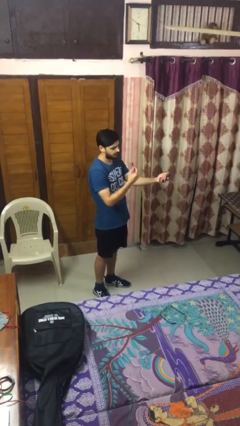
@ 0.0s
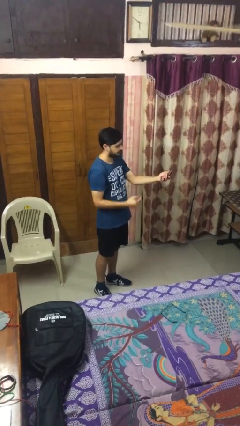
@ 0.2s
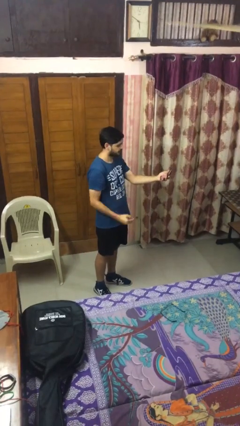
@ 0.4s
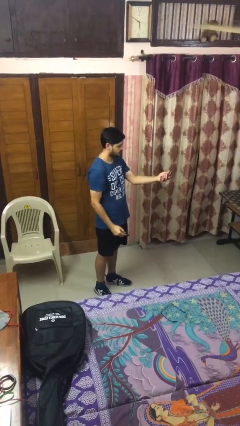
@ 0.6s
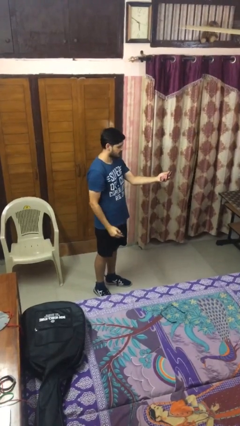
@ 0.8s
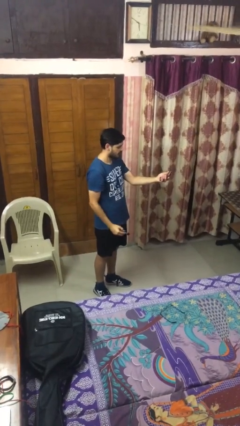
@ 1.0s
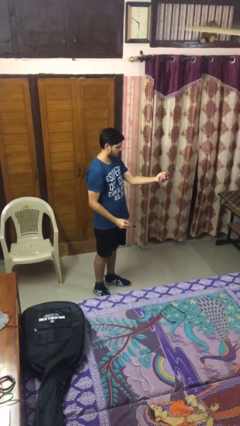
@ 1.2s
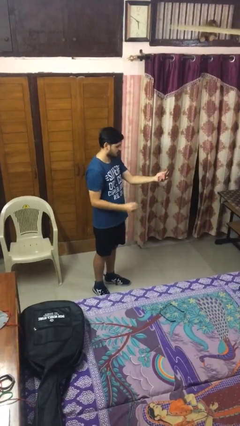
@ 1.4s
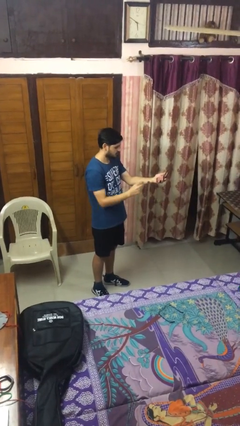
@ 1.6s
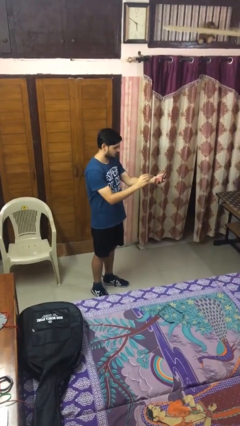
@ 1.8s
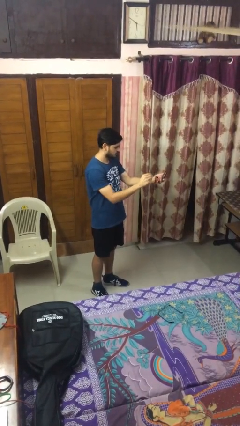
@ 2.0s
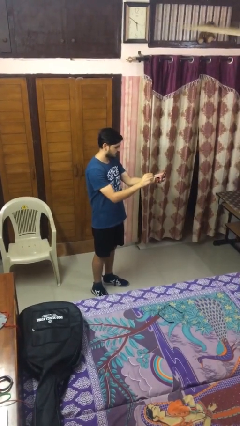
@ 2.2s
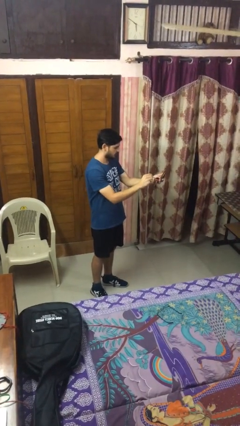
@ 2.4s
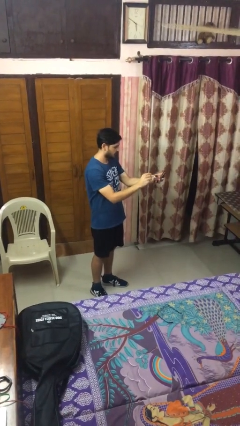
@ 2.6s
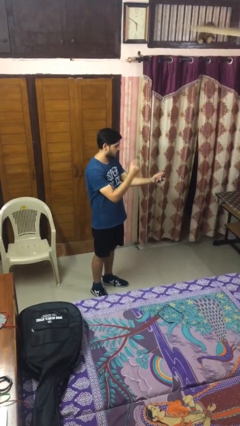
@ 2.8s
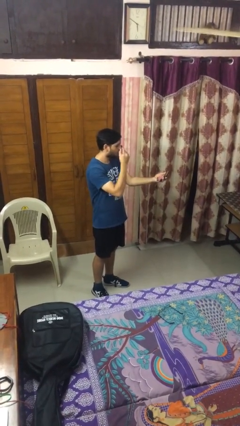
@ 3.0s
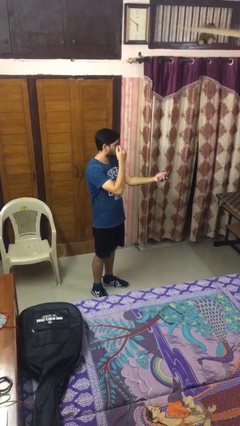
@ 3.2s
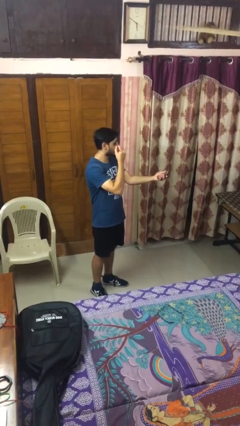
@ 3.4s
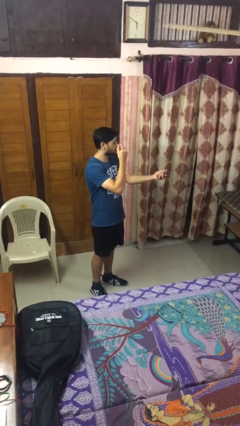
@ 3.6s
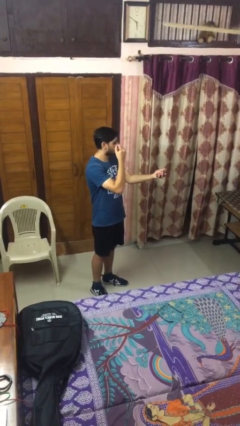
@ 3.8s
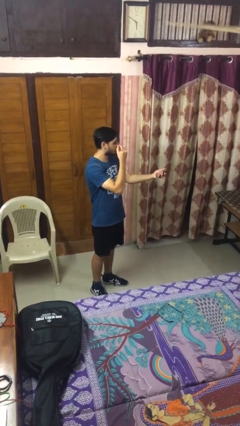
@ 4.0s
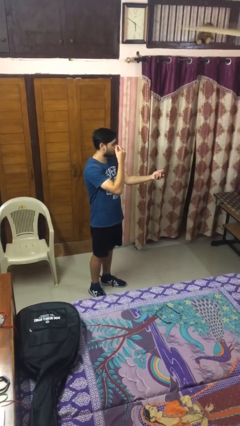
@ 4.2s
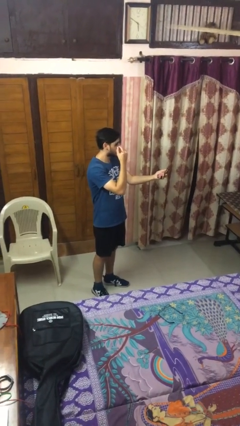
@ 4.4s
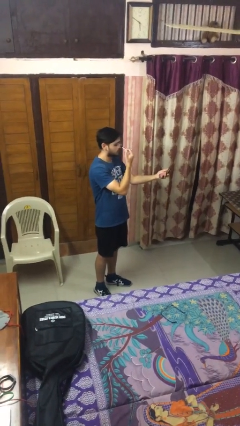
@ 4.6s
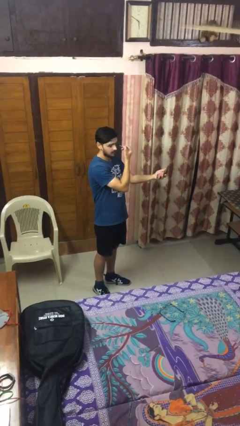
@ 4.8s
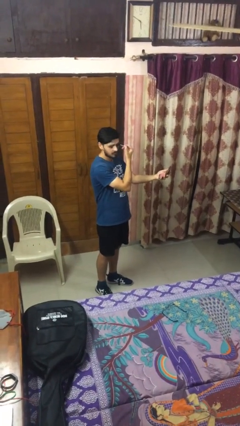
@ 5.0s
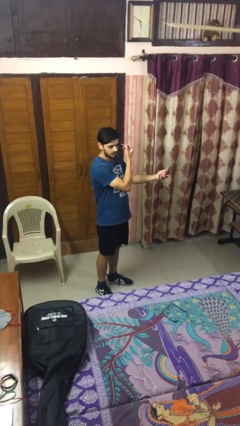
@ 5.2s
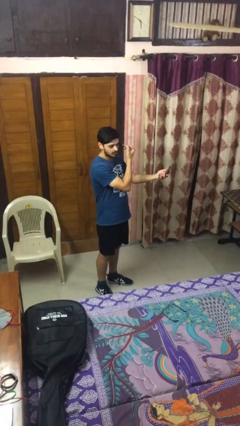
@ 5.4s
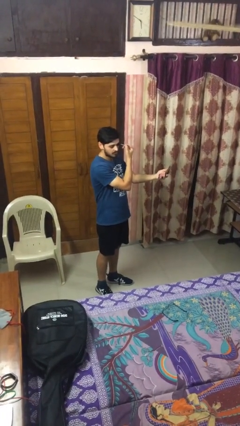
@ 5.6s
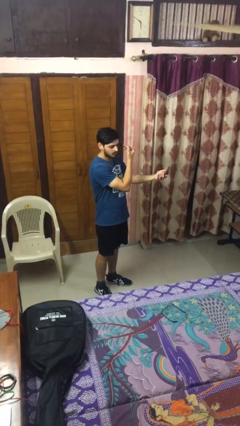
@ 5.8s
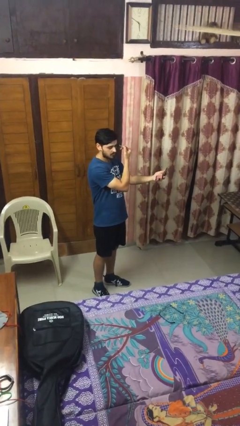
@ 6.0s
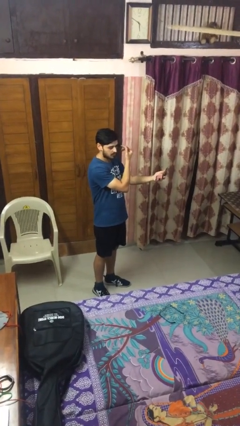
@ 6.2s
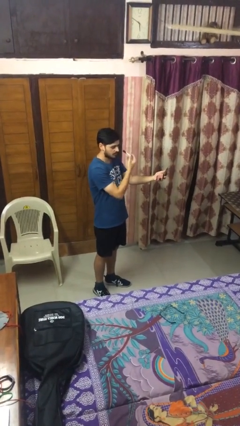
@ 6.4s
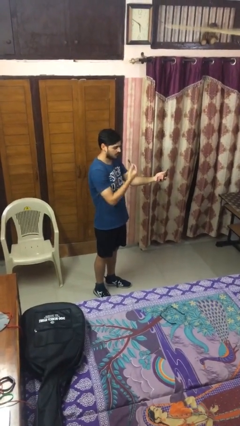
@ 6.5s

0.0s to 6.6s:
person applies eye makeup

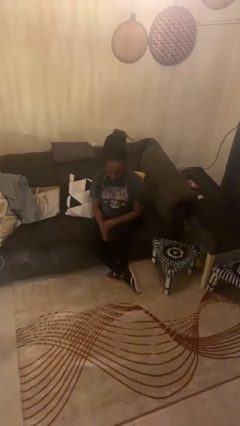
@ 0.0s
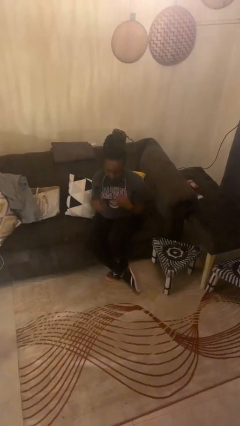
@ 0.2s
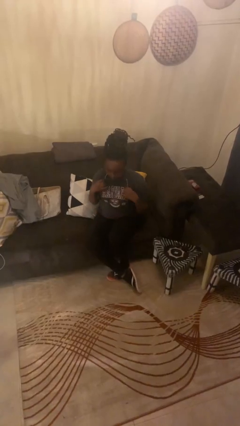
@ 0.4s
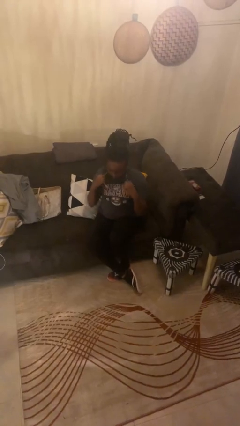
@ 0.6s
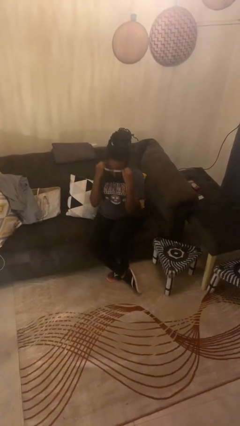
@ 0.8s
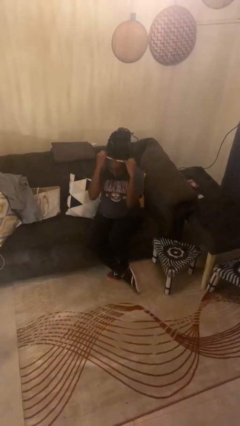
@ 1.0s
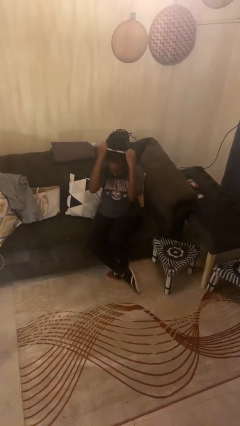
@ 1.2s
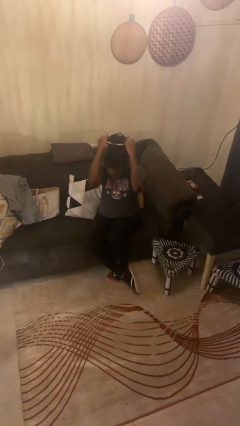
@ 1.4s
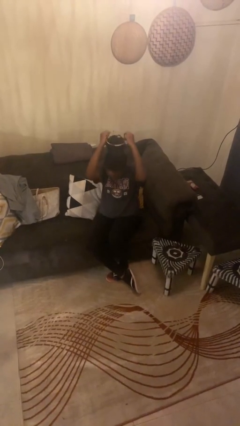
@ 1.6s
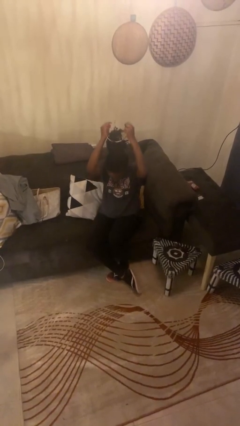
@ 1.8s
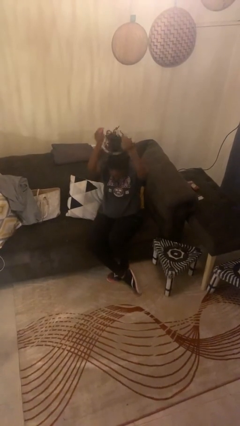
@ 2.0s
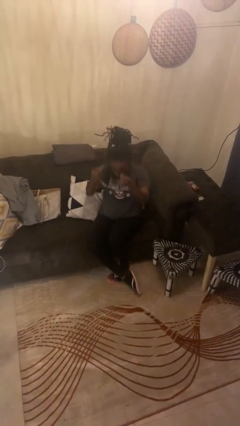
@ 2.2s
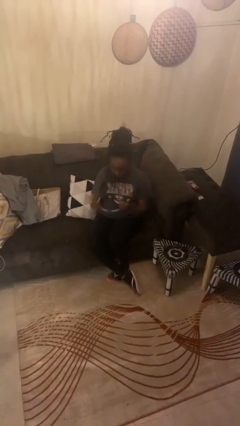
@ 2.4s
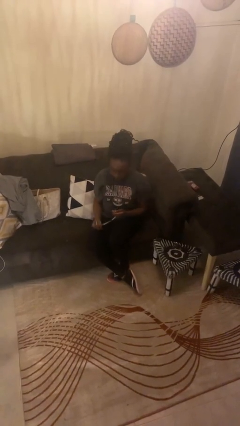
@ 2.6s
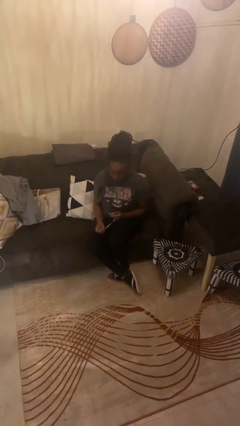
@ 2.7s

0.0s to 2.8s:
person takes off necklace

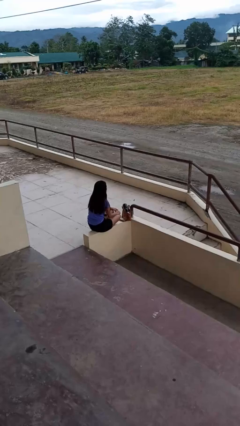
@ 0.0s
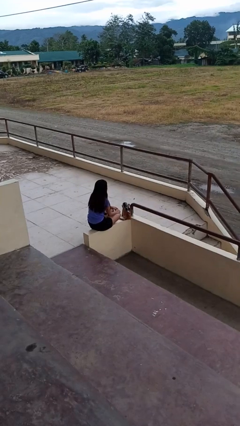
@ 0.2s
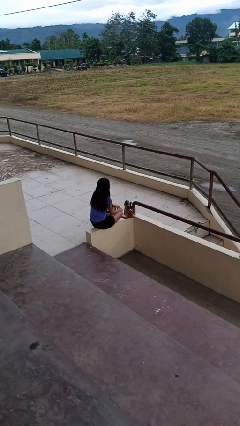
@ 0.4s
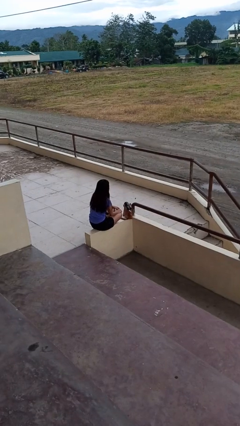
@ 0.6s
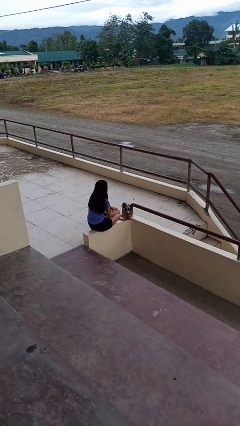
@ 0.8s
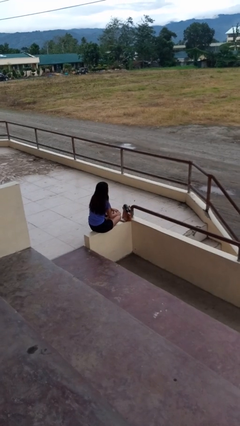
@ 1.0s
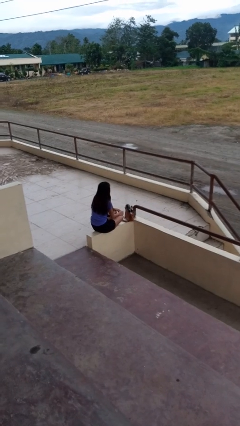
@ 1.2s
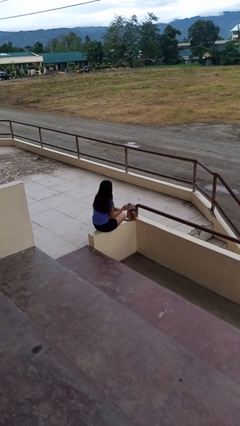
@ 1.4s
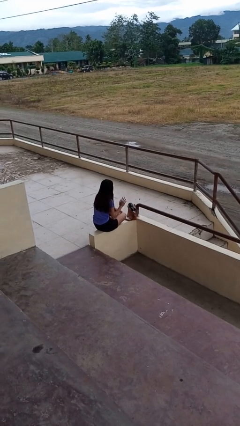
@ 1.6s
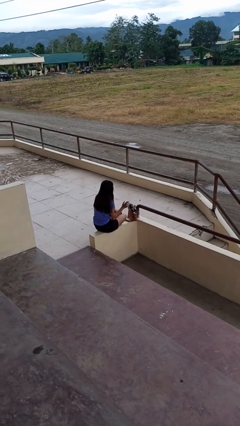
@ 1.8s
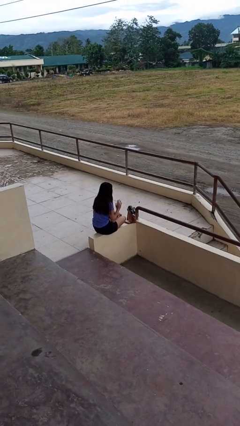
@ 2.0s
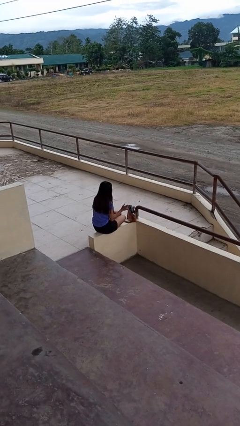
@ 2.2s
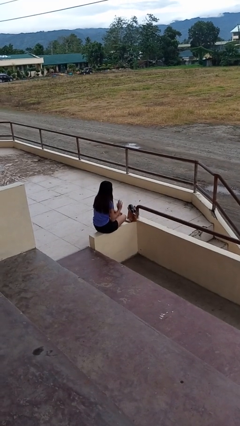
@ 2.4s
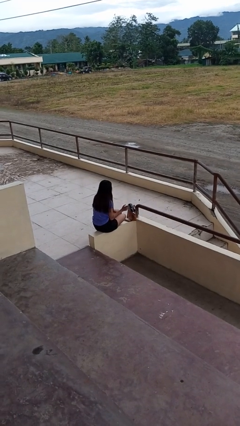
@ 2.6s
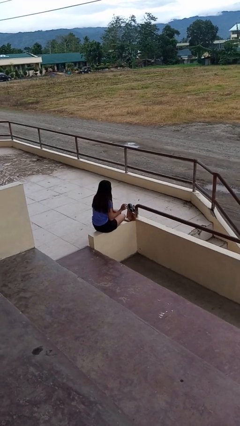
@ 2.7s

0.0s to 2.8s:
person waves hand over object

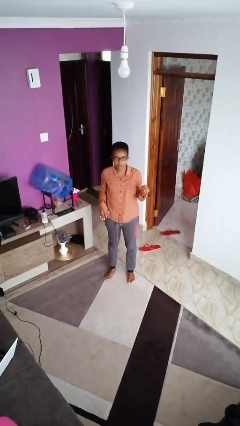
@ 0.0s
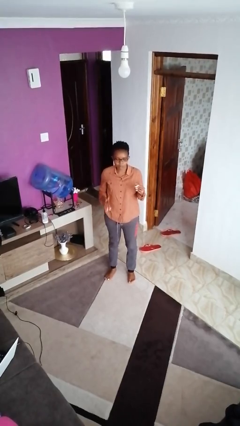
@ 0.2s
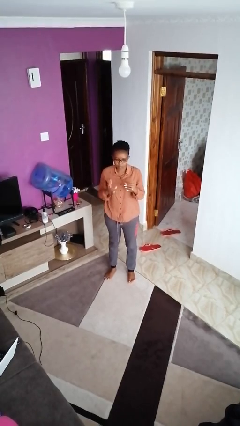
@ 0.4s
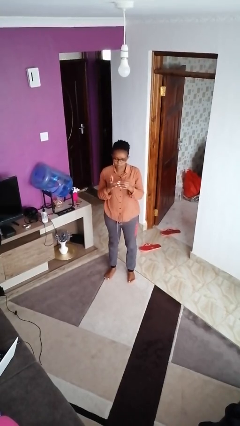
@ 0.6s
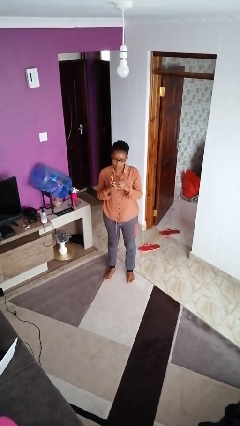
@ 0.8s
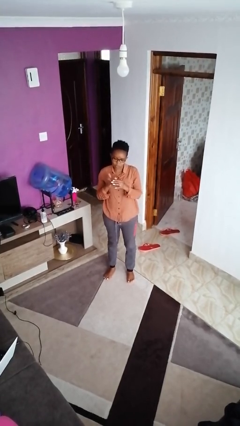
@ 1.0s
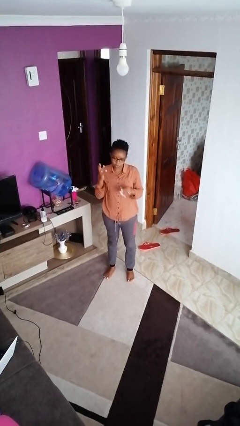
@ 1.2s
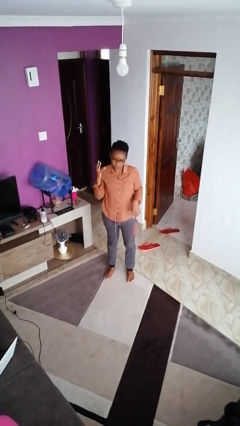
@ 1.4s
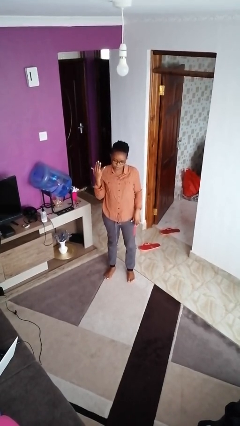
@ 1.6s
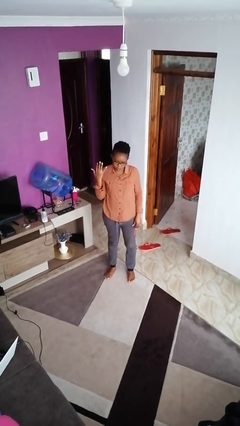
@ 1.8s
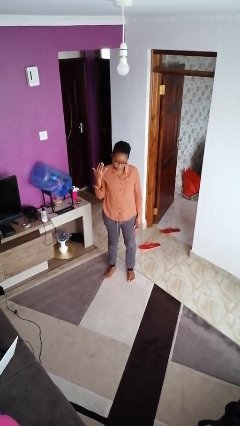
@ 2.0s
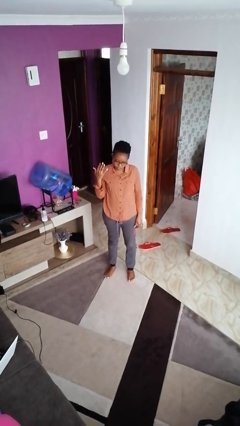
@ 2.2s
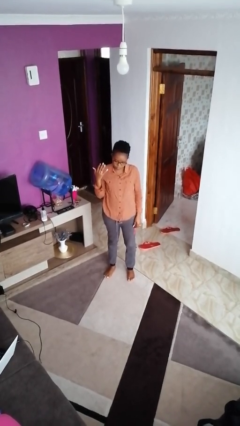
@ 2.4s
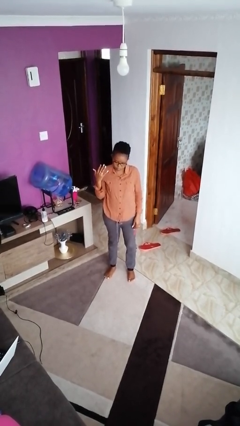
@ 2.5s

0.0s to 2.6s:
person puts on ring

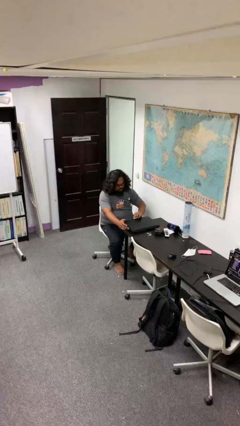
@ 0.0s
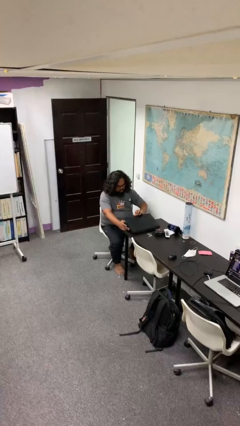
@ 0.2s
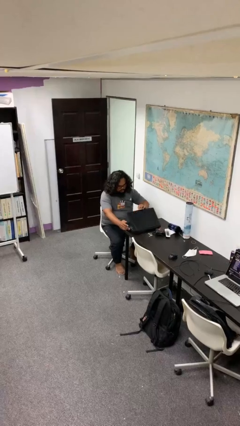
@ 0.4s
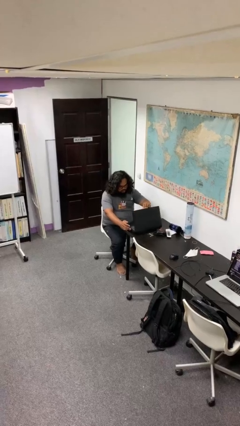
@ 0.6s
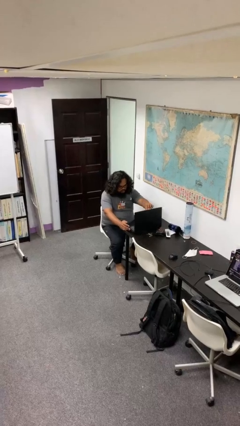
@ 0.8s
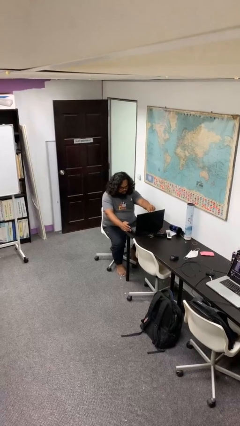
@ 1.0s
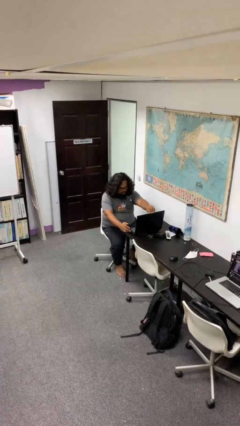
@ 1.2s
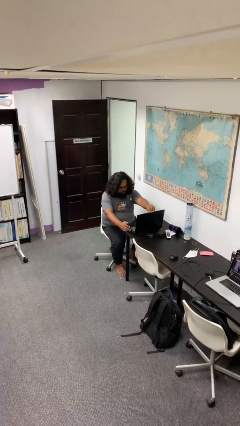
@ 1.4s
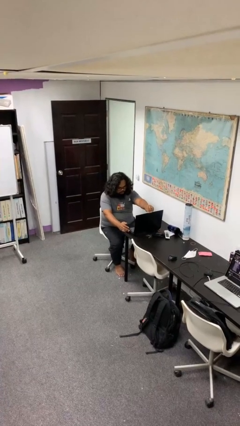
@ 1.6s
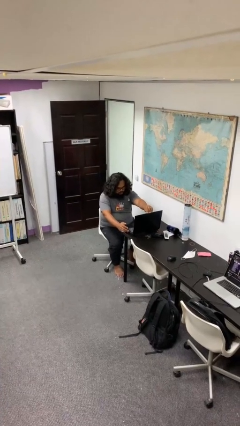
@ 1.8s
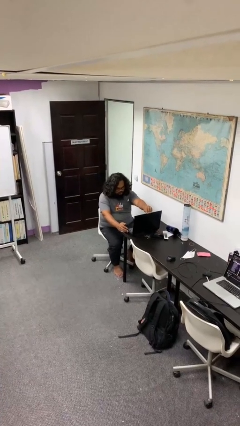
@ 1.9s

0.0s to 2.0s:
person opens laptop

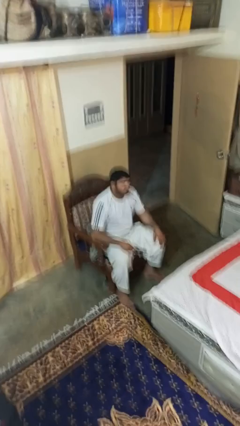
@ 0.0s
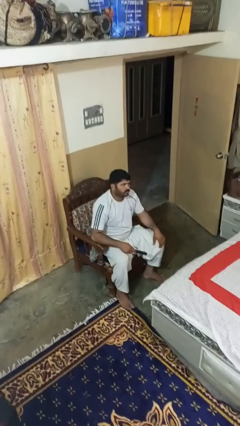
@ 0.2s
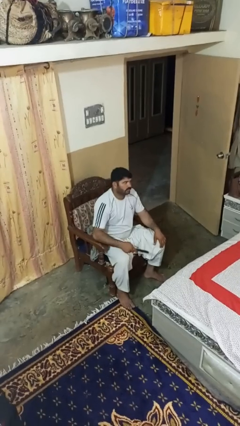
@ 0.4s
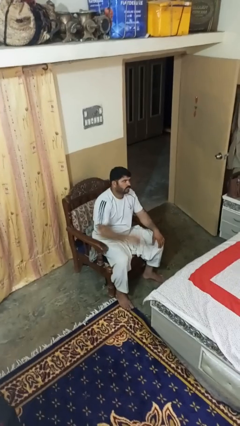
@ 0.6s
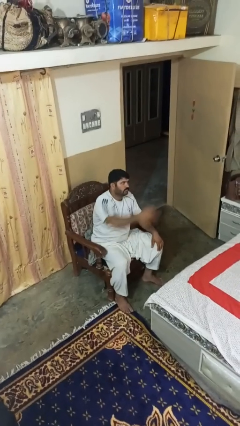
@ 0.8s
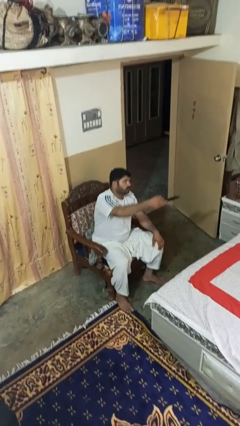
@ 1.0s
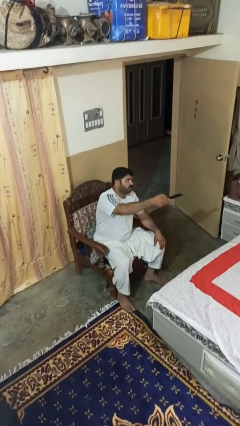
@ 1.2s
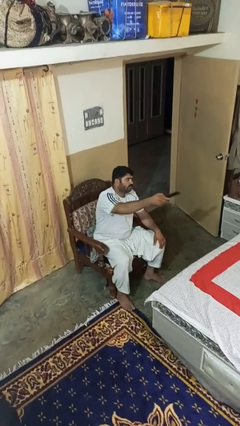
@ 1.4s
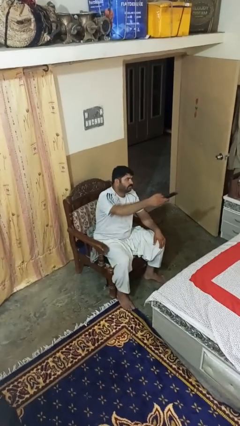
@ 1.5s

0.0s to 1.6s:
person uses television remote
